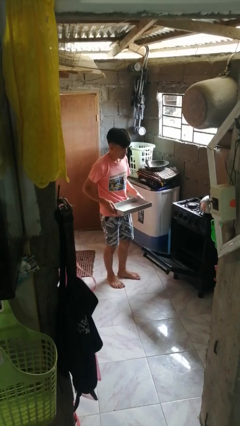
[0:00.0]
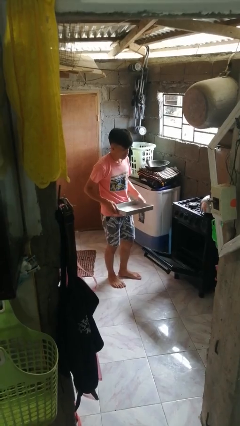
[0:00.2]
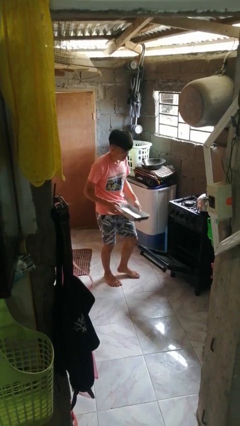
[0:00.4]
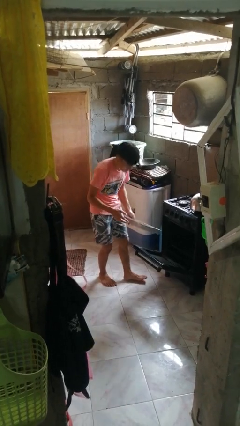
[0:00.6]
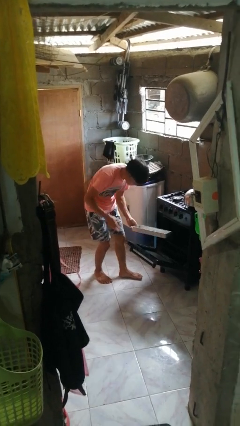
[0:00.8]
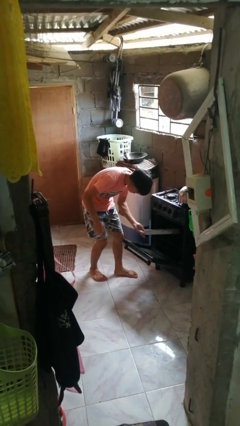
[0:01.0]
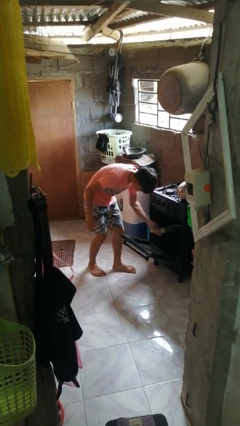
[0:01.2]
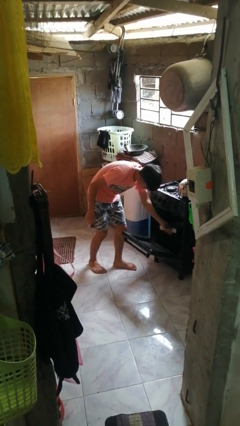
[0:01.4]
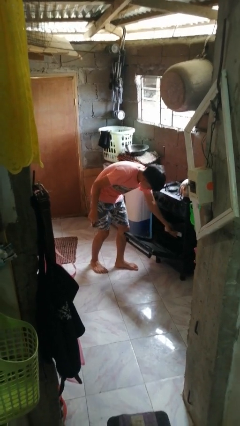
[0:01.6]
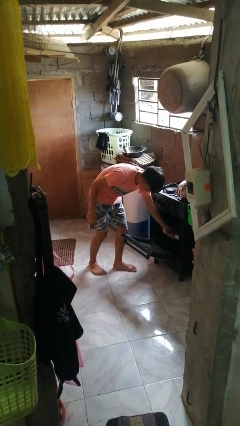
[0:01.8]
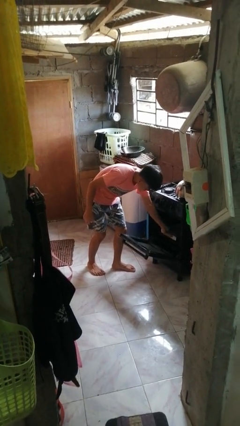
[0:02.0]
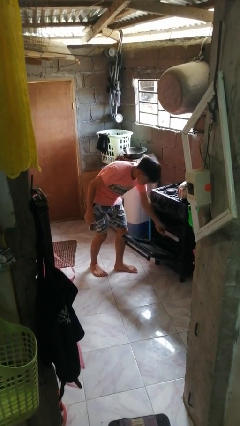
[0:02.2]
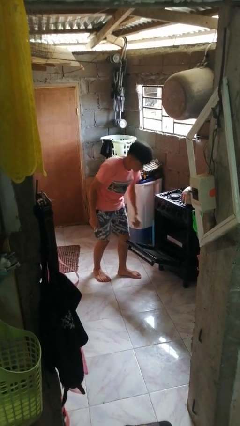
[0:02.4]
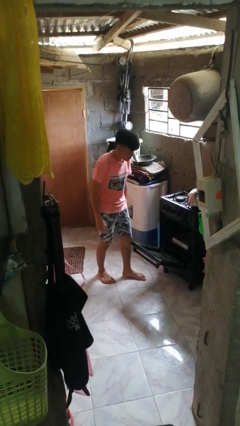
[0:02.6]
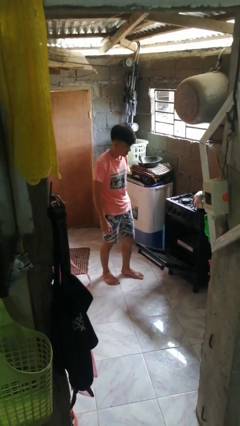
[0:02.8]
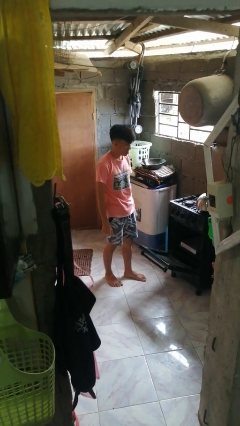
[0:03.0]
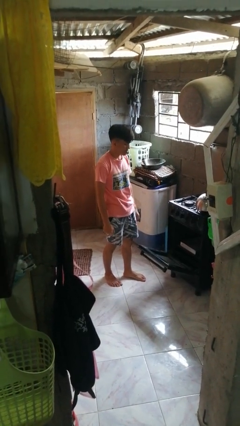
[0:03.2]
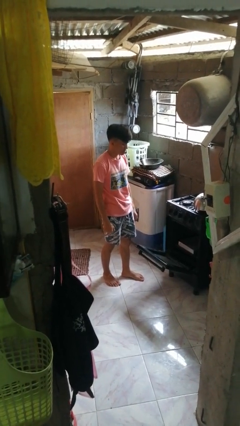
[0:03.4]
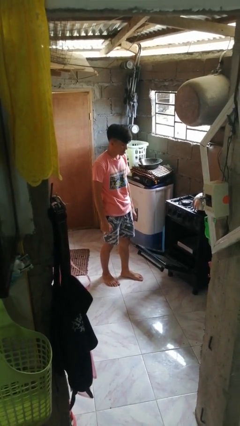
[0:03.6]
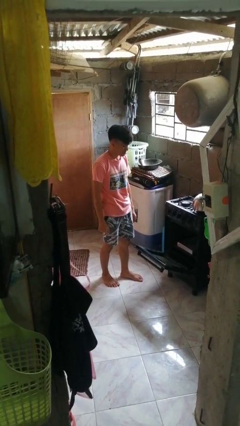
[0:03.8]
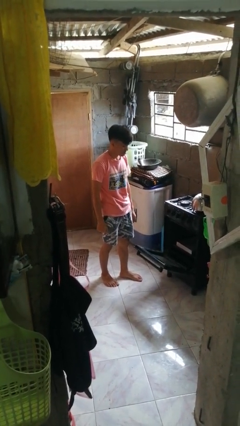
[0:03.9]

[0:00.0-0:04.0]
person puts object into oven

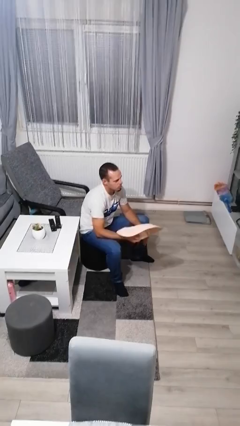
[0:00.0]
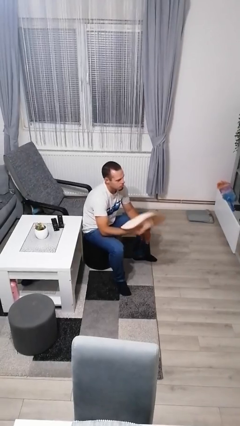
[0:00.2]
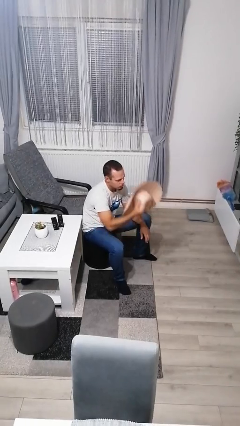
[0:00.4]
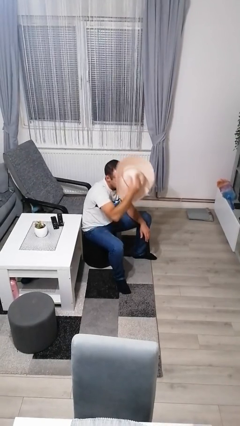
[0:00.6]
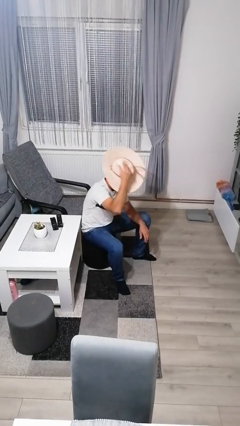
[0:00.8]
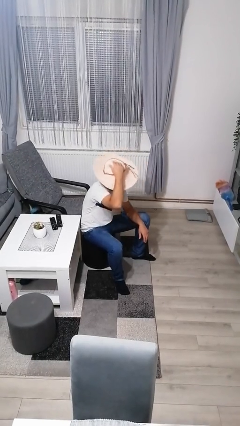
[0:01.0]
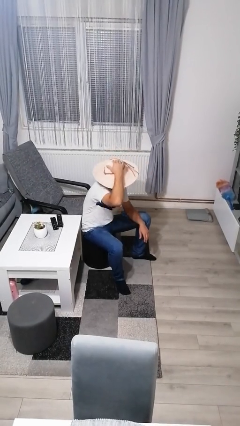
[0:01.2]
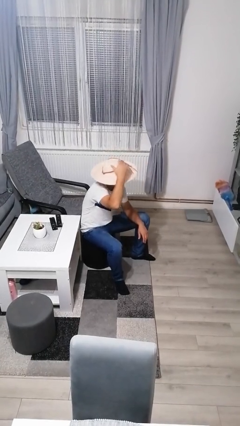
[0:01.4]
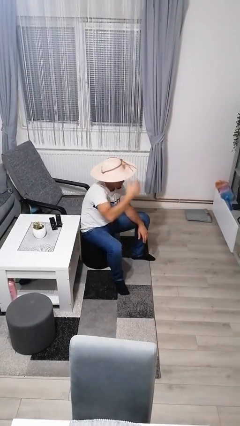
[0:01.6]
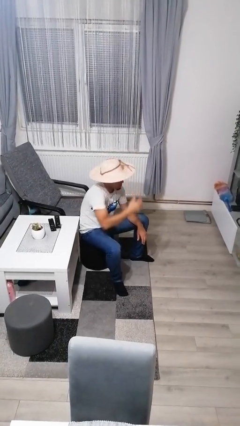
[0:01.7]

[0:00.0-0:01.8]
person puts on hat

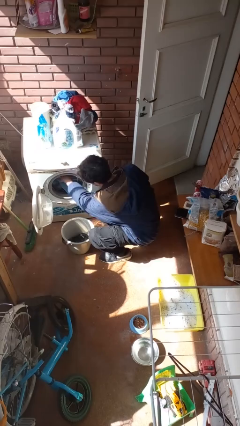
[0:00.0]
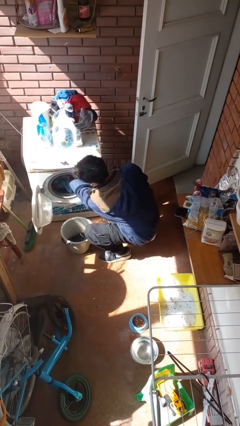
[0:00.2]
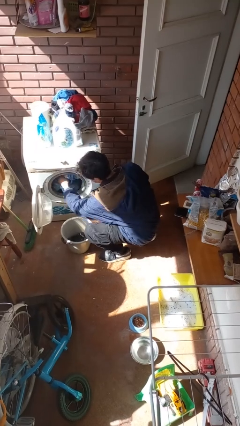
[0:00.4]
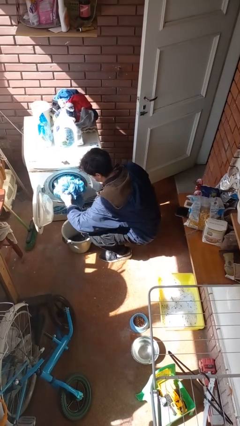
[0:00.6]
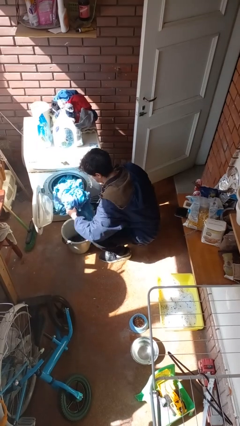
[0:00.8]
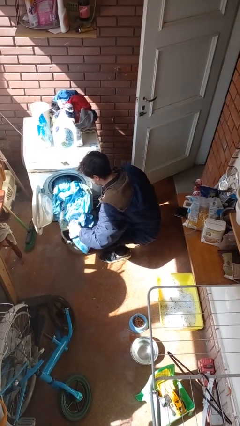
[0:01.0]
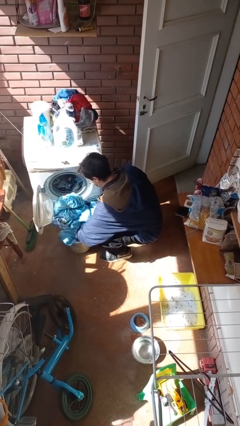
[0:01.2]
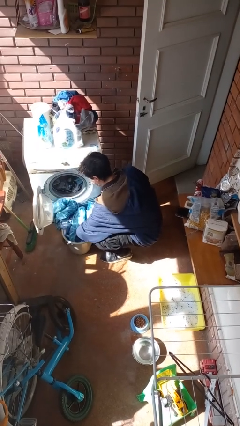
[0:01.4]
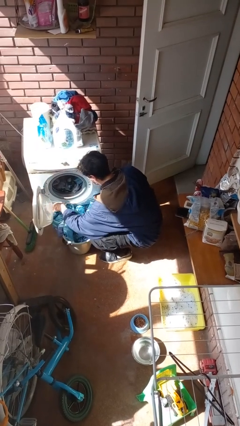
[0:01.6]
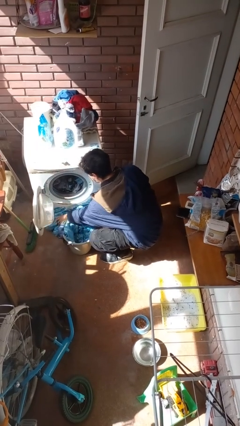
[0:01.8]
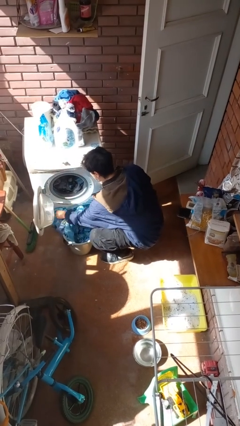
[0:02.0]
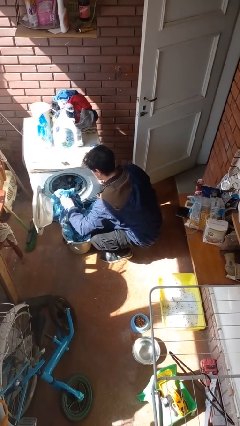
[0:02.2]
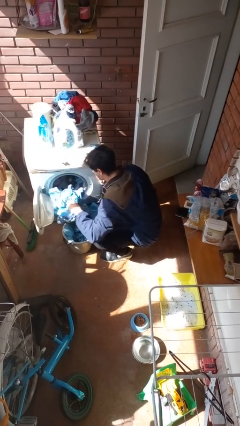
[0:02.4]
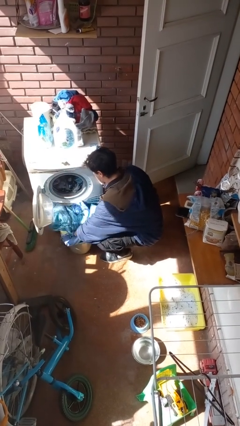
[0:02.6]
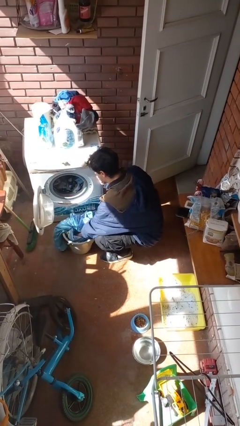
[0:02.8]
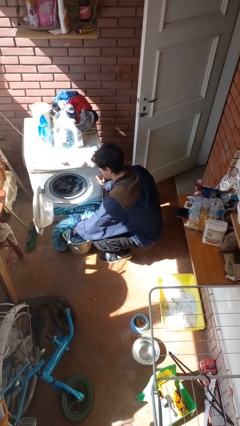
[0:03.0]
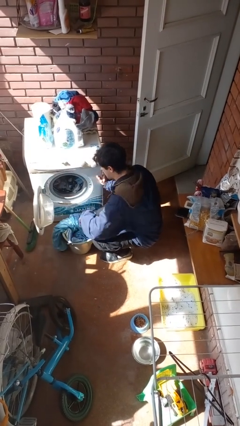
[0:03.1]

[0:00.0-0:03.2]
person unloads clotheswasher

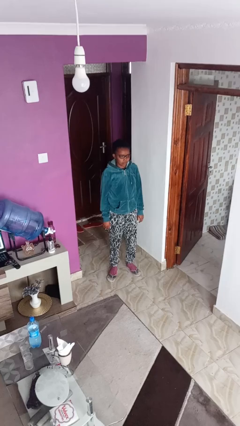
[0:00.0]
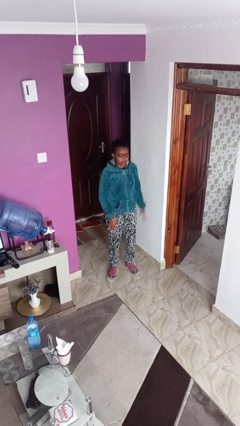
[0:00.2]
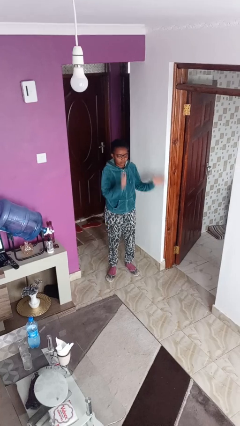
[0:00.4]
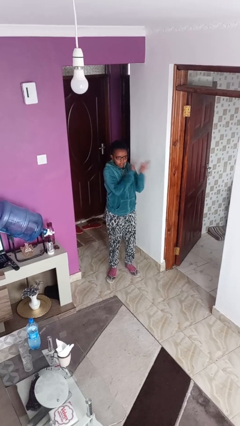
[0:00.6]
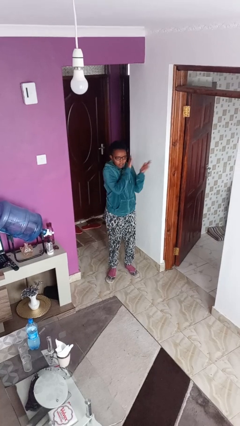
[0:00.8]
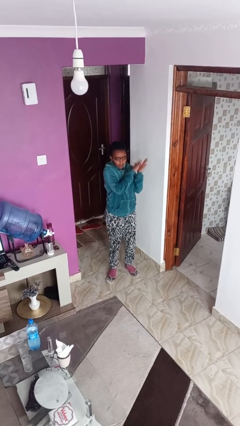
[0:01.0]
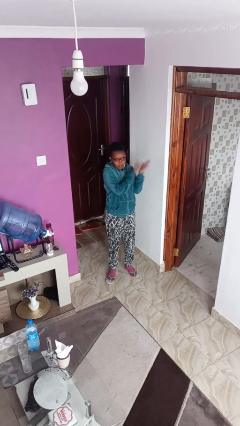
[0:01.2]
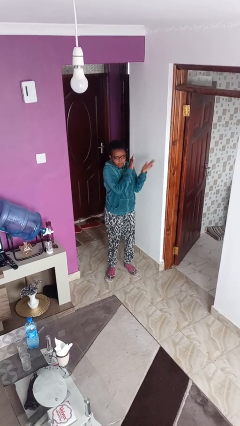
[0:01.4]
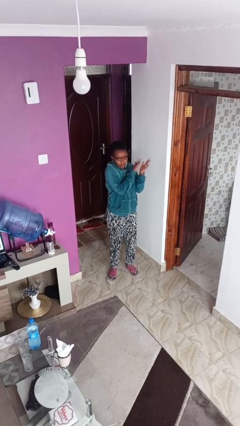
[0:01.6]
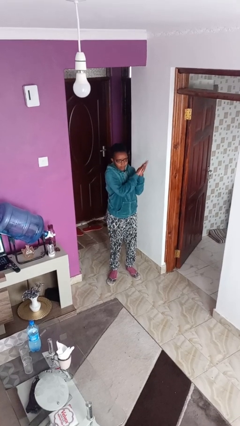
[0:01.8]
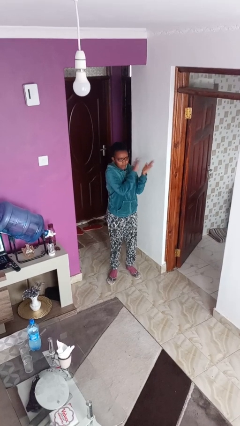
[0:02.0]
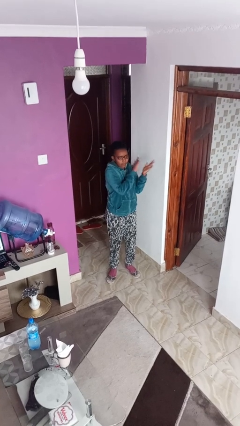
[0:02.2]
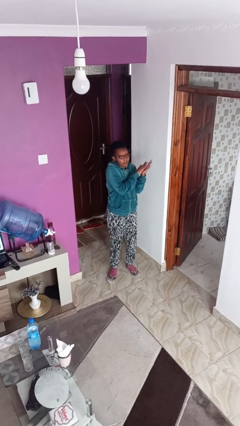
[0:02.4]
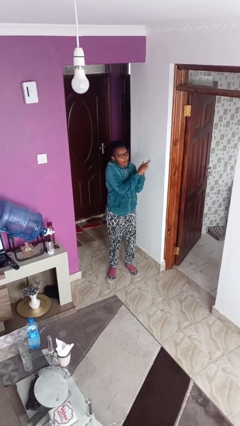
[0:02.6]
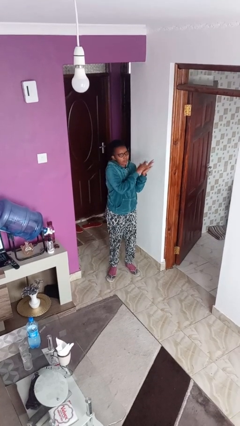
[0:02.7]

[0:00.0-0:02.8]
person claps hands

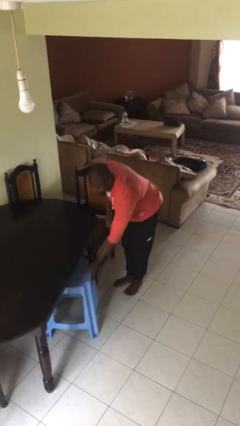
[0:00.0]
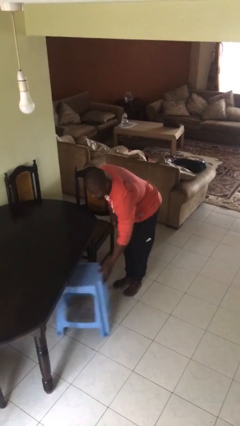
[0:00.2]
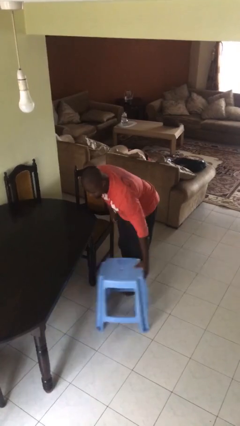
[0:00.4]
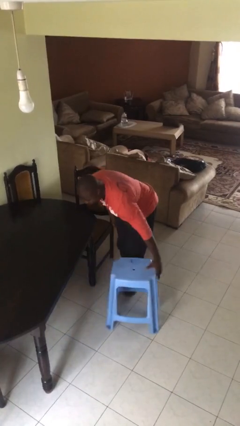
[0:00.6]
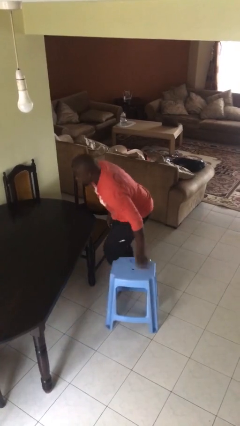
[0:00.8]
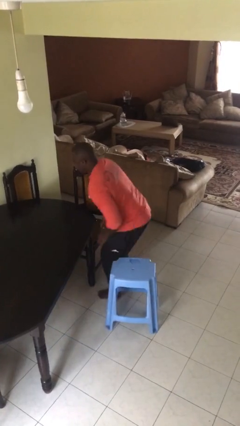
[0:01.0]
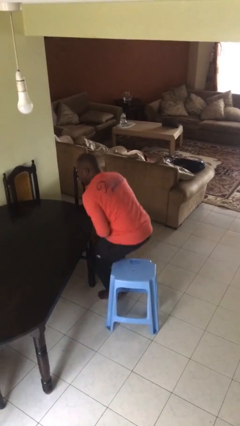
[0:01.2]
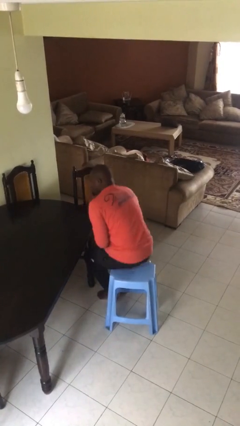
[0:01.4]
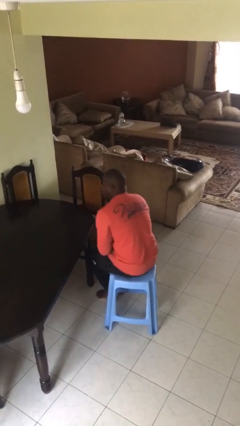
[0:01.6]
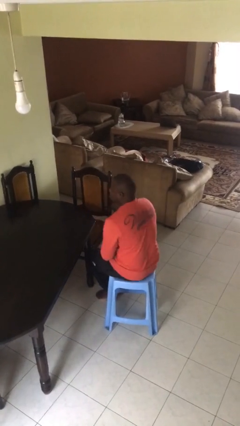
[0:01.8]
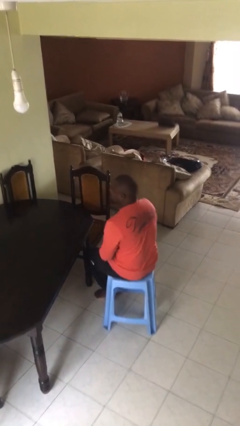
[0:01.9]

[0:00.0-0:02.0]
person sits down

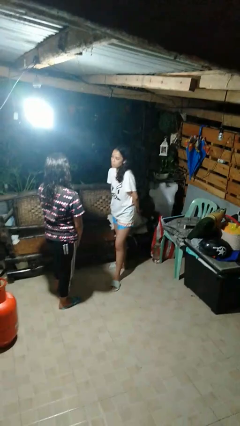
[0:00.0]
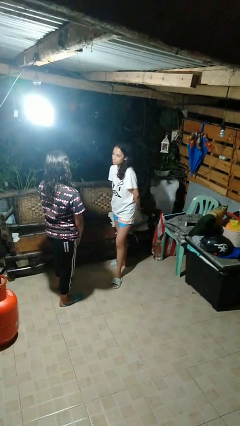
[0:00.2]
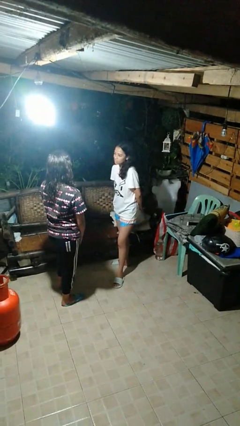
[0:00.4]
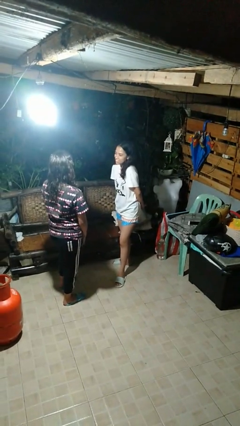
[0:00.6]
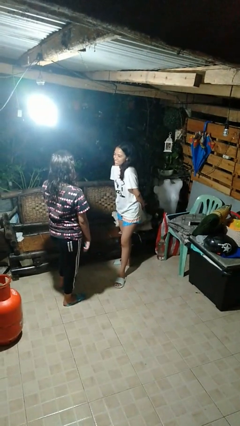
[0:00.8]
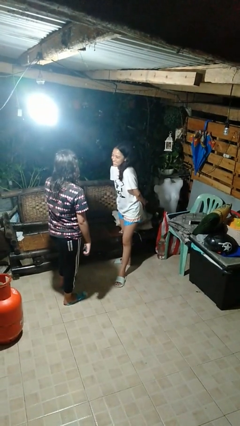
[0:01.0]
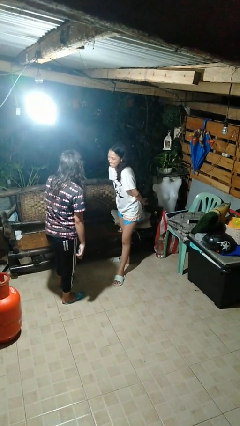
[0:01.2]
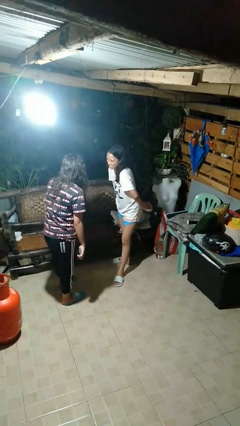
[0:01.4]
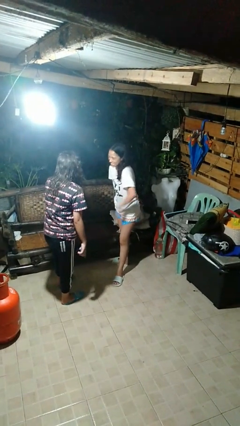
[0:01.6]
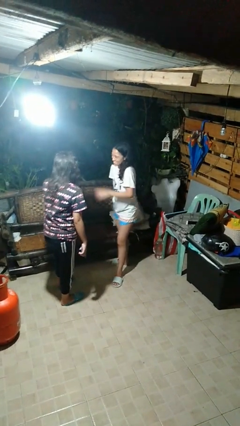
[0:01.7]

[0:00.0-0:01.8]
person laughs with person

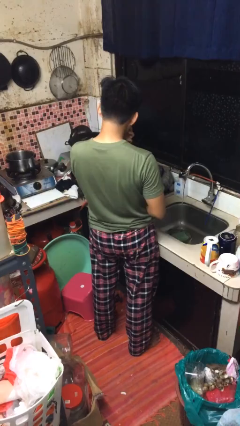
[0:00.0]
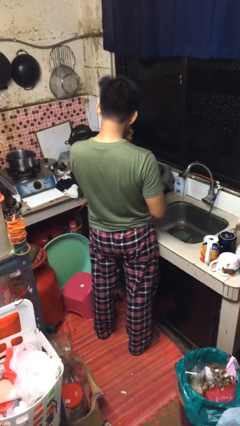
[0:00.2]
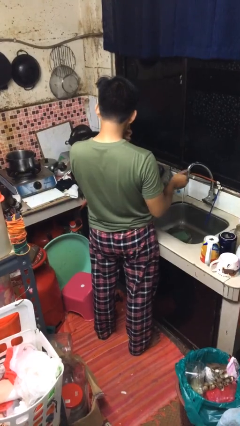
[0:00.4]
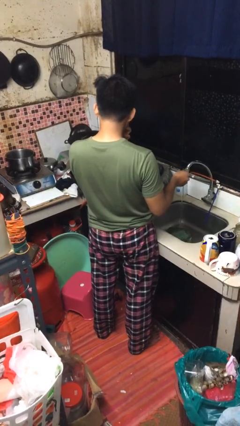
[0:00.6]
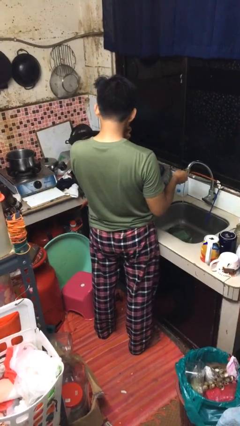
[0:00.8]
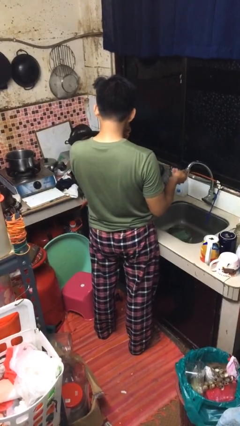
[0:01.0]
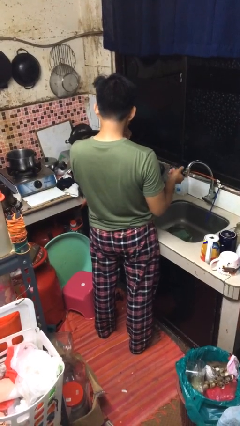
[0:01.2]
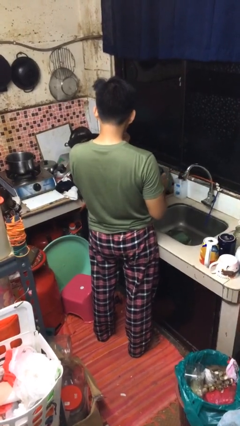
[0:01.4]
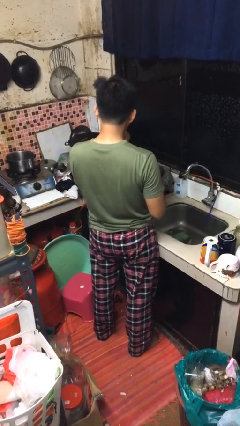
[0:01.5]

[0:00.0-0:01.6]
person turns off faucet
